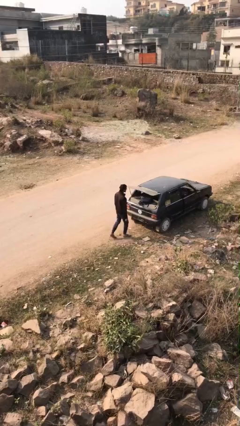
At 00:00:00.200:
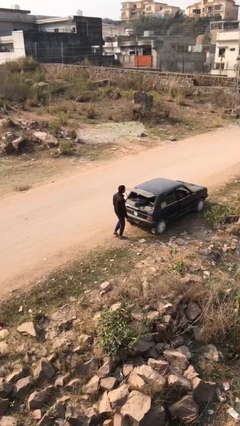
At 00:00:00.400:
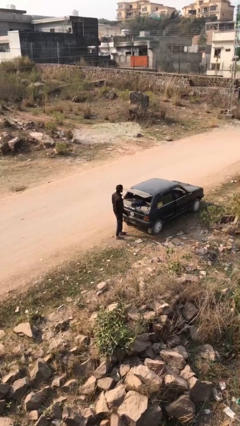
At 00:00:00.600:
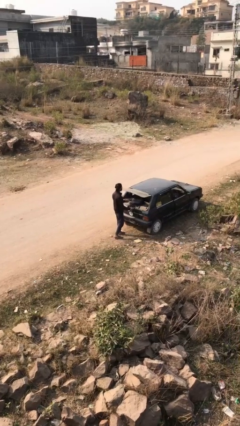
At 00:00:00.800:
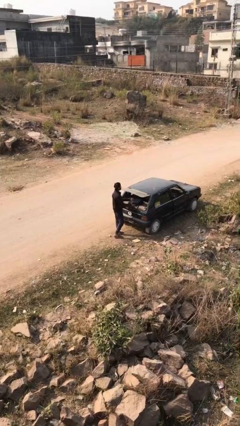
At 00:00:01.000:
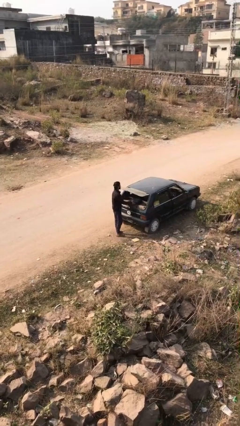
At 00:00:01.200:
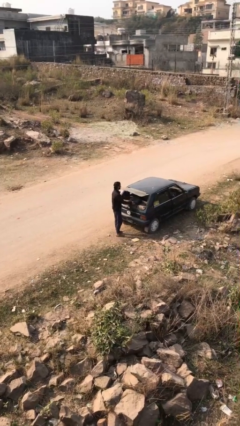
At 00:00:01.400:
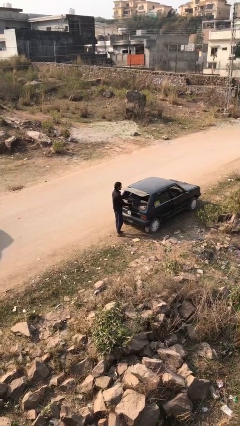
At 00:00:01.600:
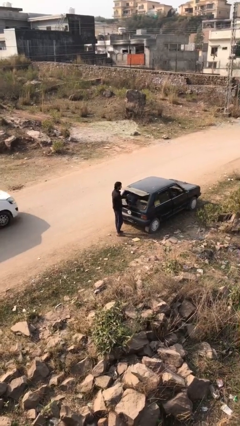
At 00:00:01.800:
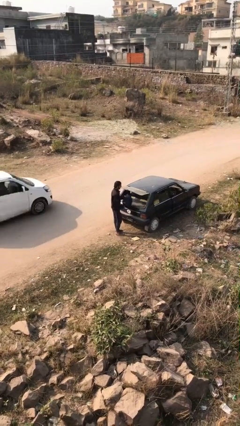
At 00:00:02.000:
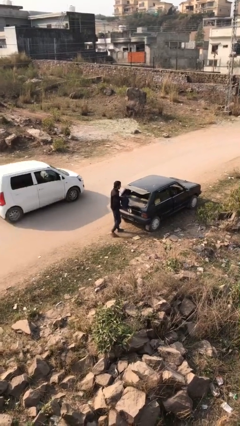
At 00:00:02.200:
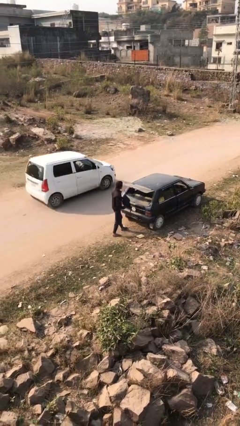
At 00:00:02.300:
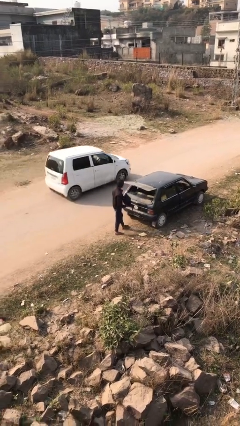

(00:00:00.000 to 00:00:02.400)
person unloads car

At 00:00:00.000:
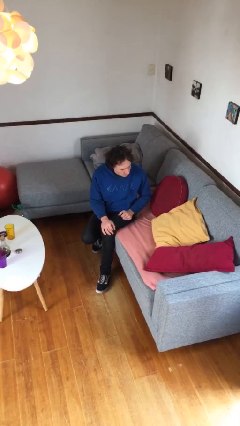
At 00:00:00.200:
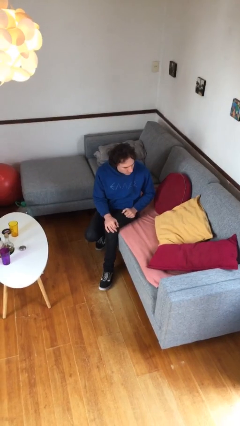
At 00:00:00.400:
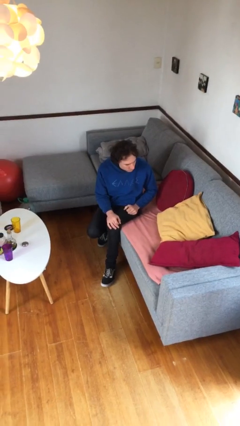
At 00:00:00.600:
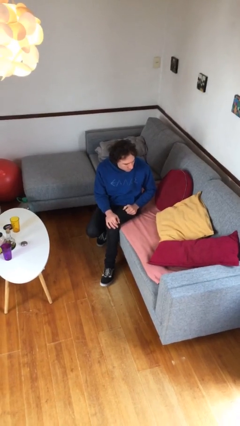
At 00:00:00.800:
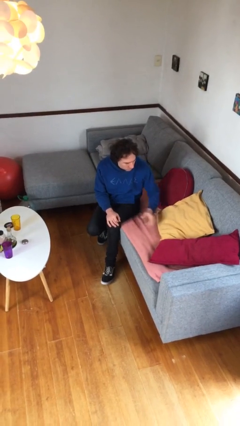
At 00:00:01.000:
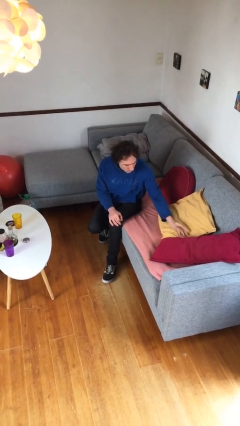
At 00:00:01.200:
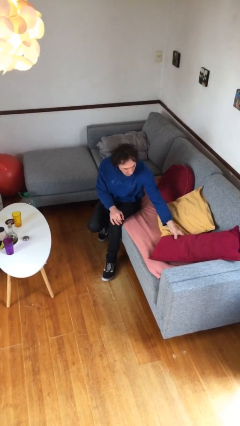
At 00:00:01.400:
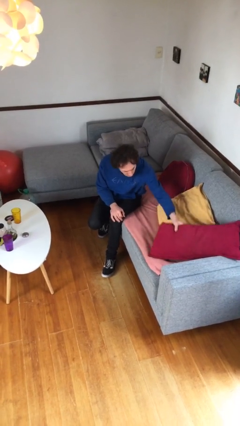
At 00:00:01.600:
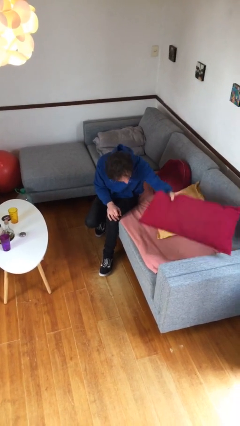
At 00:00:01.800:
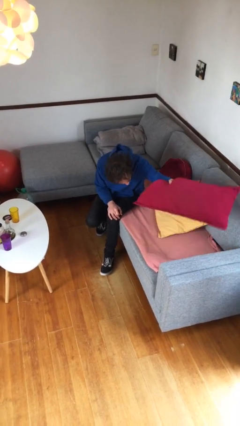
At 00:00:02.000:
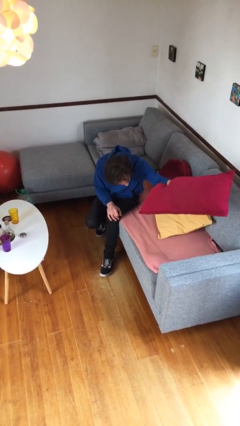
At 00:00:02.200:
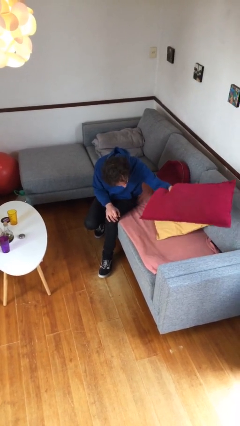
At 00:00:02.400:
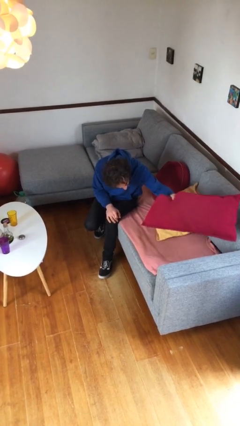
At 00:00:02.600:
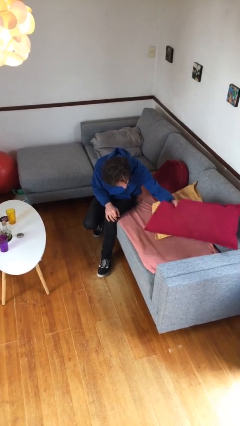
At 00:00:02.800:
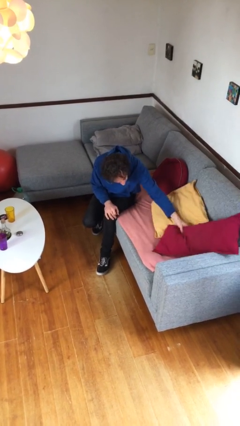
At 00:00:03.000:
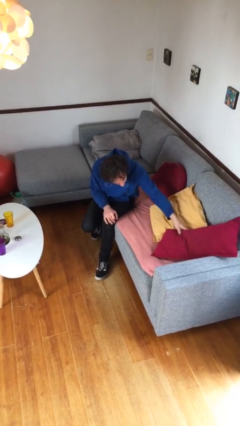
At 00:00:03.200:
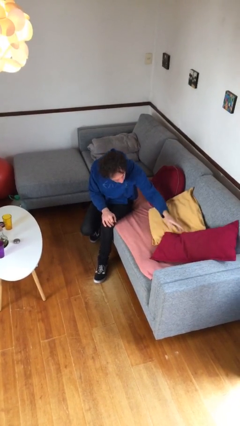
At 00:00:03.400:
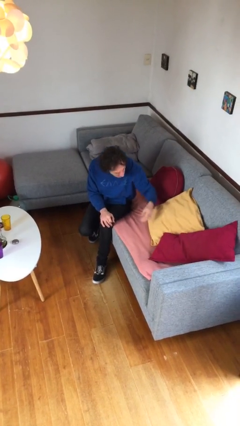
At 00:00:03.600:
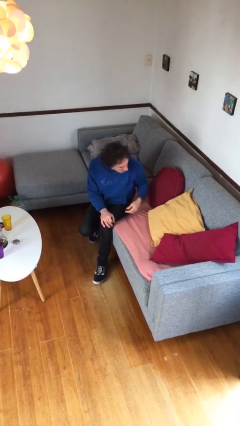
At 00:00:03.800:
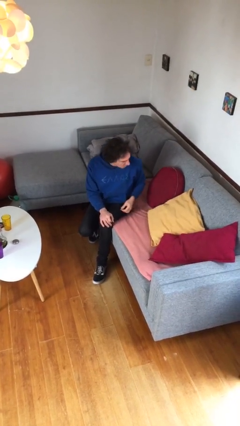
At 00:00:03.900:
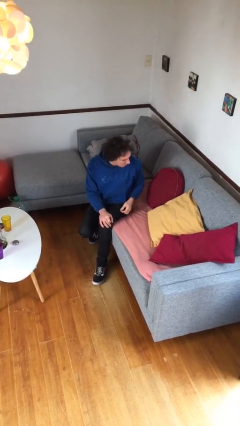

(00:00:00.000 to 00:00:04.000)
person searches in couch

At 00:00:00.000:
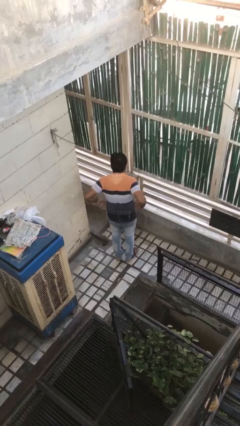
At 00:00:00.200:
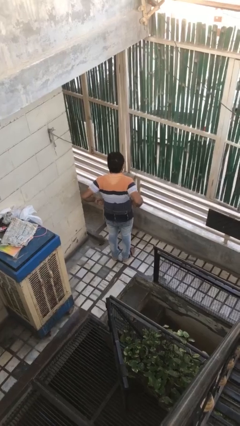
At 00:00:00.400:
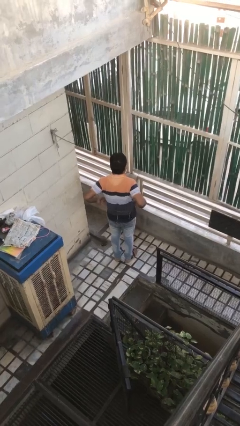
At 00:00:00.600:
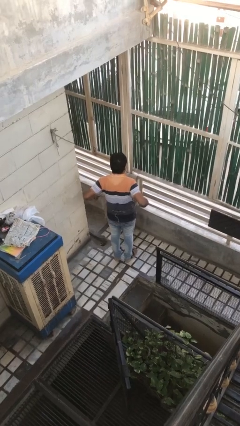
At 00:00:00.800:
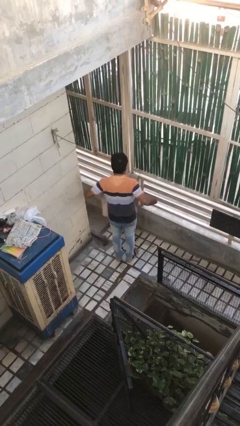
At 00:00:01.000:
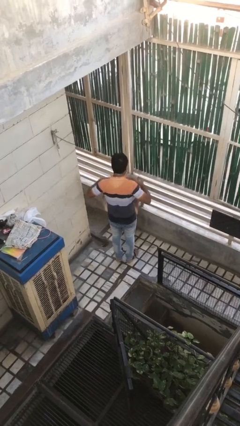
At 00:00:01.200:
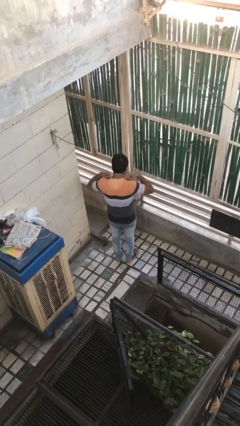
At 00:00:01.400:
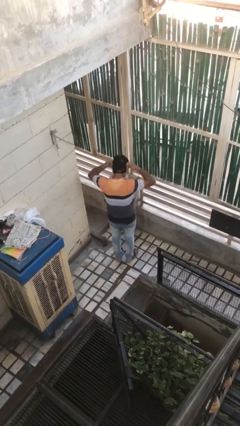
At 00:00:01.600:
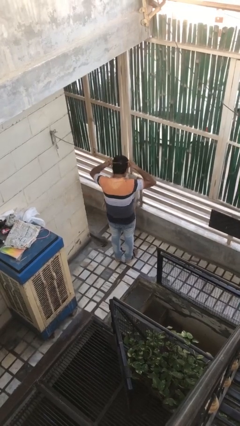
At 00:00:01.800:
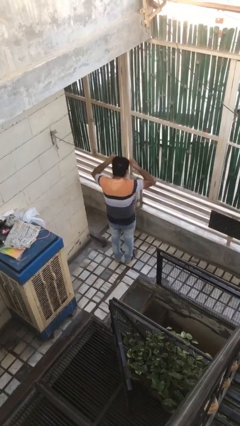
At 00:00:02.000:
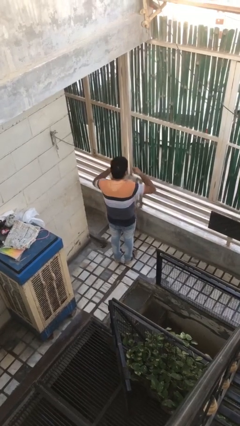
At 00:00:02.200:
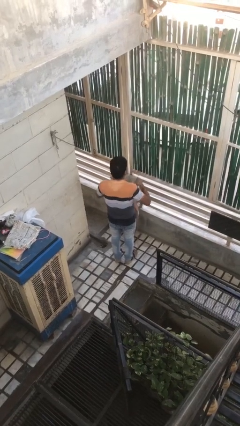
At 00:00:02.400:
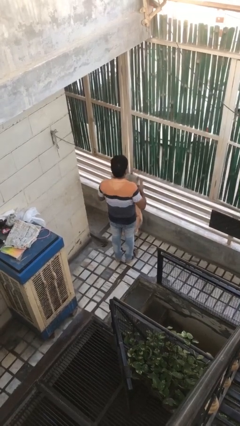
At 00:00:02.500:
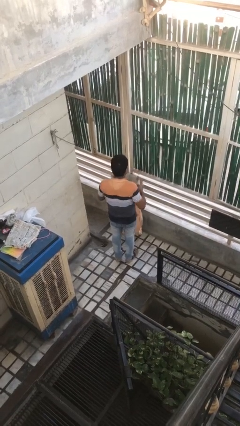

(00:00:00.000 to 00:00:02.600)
person takes off apron

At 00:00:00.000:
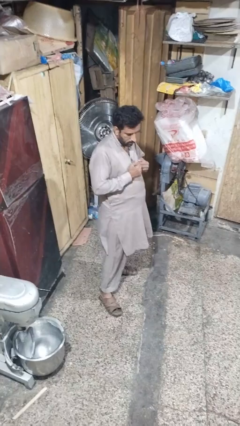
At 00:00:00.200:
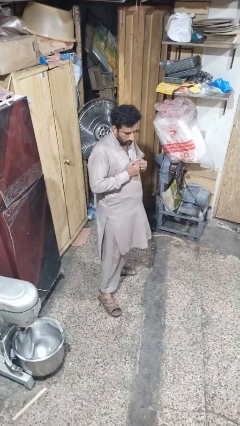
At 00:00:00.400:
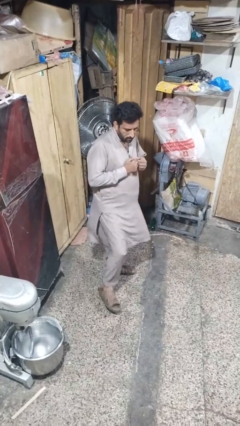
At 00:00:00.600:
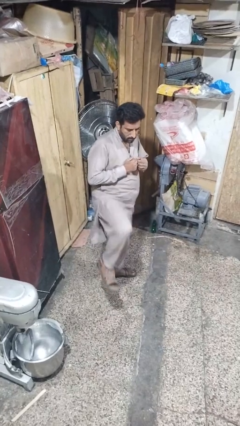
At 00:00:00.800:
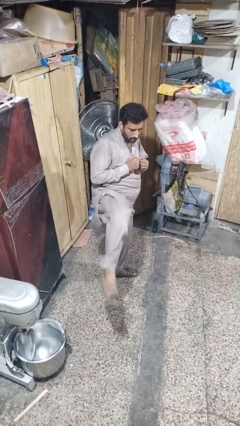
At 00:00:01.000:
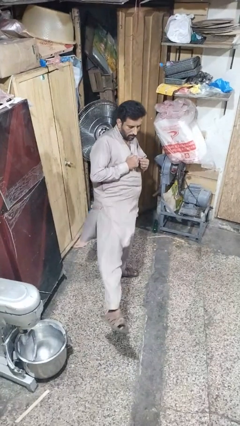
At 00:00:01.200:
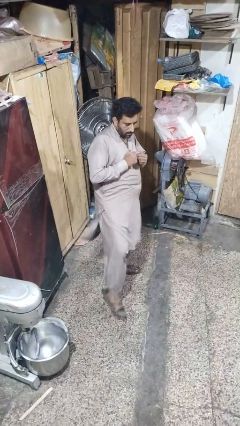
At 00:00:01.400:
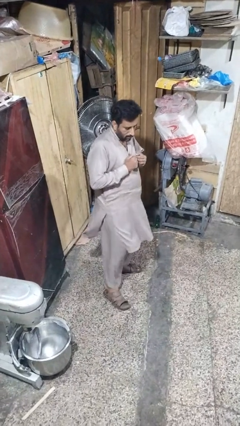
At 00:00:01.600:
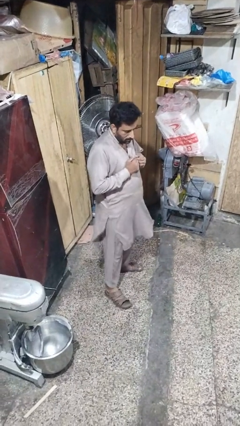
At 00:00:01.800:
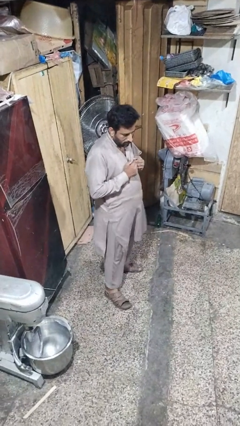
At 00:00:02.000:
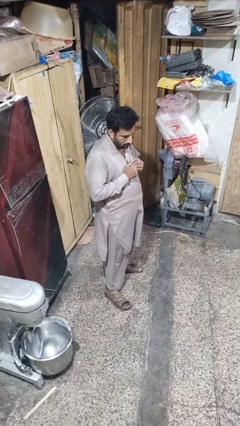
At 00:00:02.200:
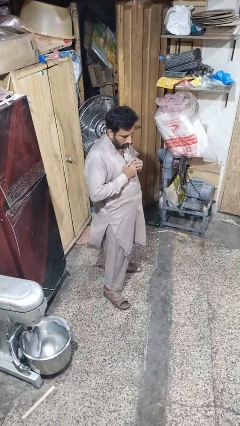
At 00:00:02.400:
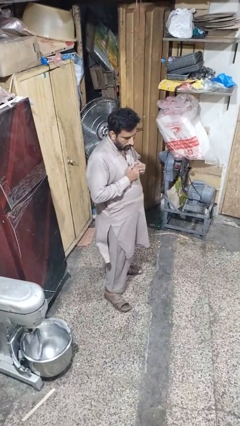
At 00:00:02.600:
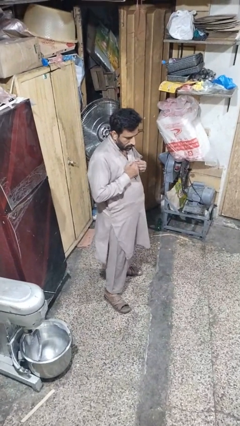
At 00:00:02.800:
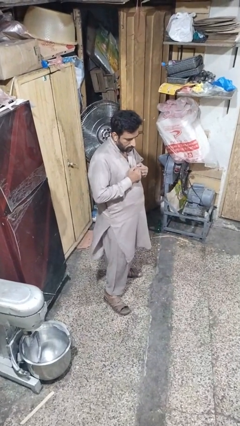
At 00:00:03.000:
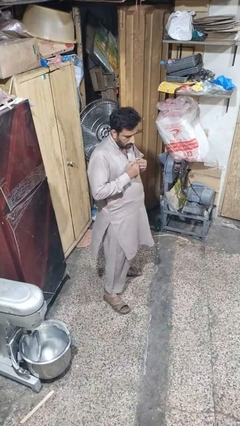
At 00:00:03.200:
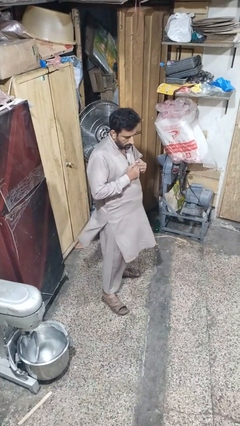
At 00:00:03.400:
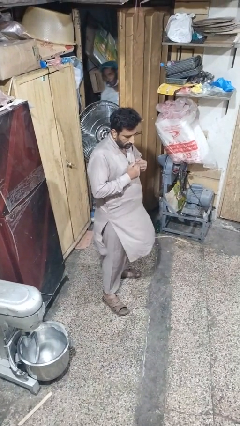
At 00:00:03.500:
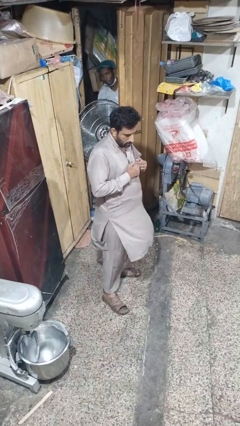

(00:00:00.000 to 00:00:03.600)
person karate kicks

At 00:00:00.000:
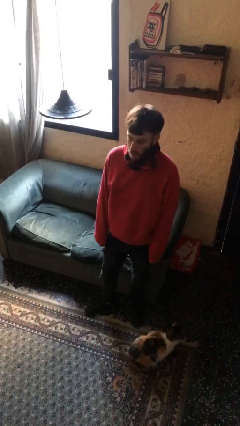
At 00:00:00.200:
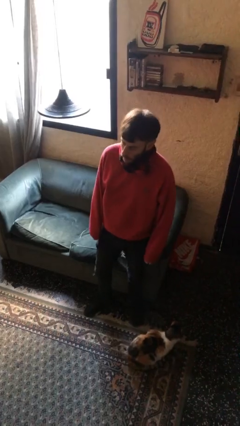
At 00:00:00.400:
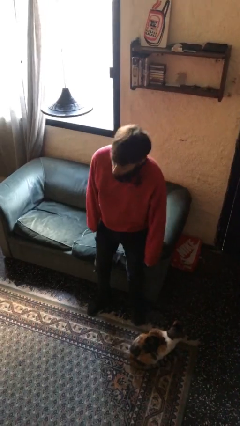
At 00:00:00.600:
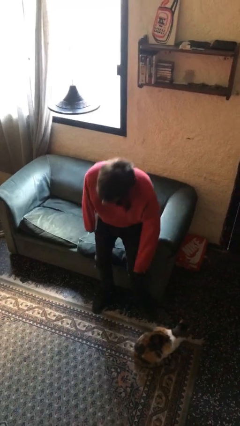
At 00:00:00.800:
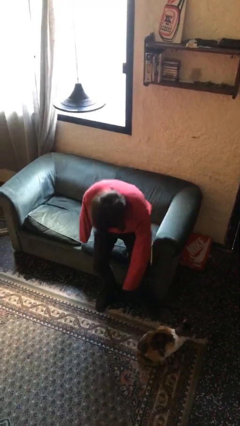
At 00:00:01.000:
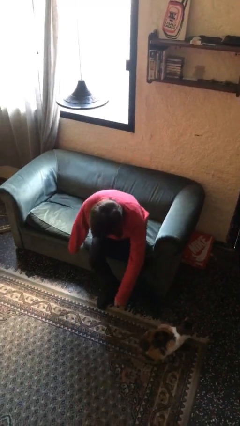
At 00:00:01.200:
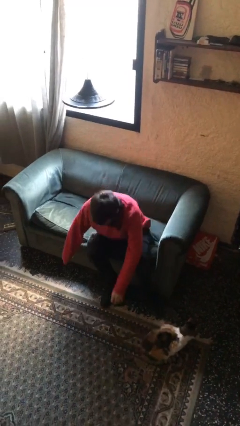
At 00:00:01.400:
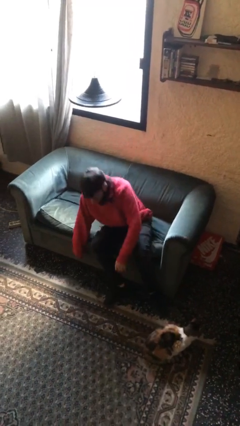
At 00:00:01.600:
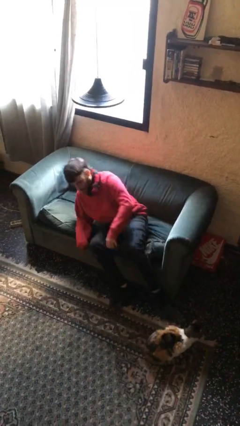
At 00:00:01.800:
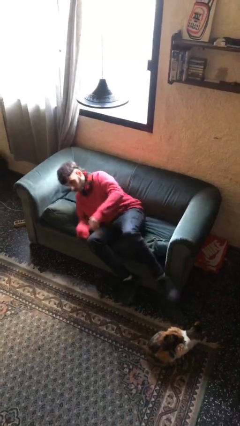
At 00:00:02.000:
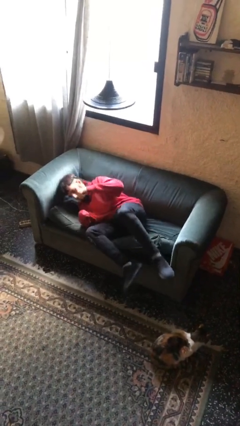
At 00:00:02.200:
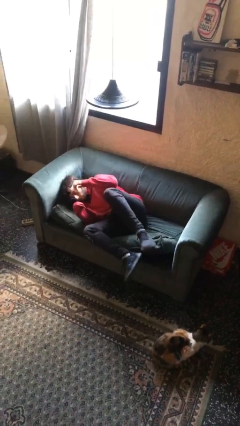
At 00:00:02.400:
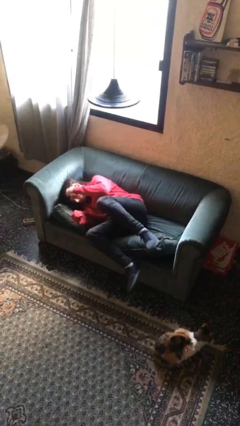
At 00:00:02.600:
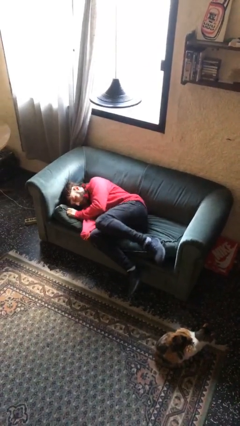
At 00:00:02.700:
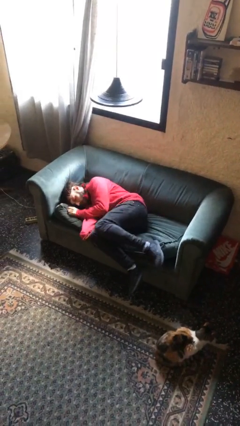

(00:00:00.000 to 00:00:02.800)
person lies down on couch

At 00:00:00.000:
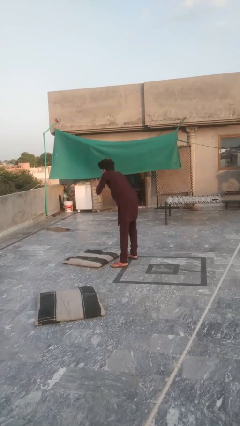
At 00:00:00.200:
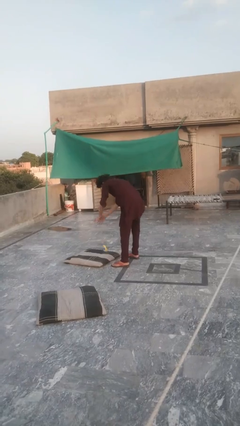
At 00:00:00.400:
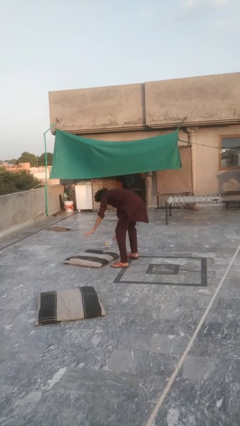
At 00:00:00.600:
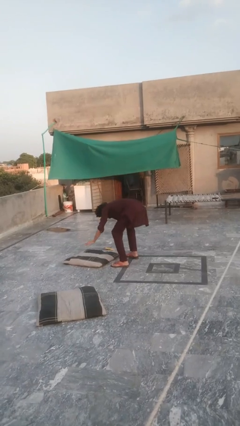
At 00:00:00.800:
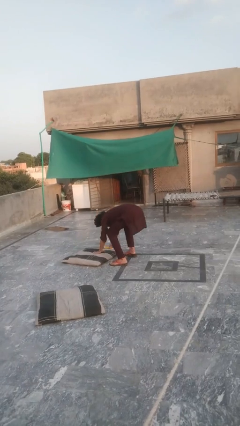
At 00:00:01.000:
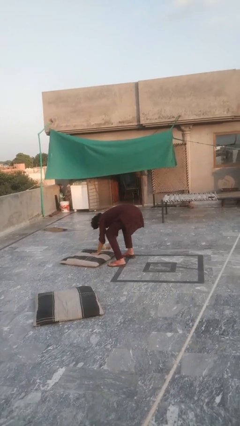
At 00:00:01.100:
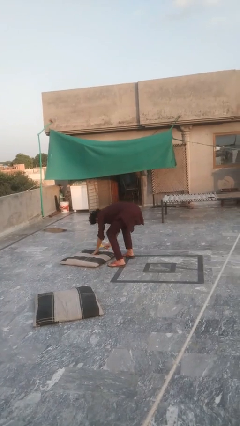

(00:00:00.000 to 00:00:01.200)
person catches dropped object

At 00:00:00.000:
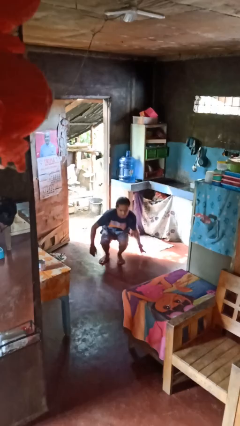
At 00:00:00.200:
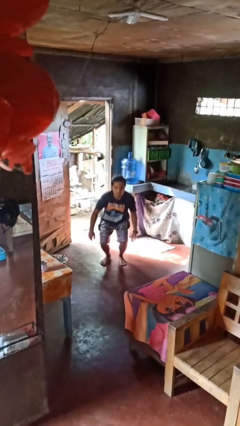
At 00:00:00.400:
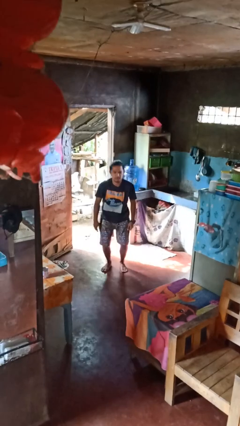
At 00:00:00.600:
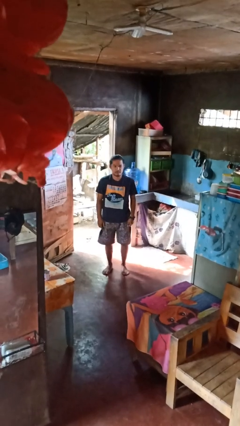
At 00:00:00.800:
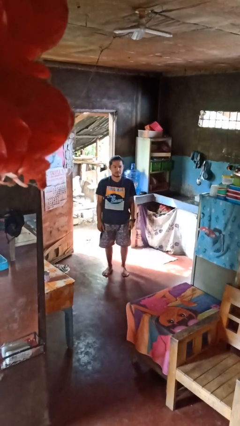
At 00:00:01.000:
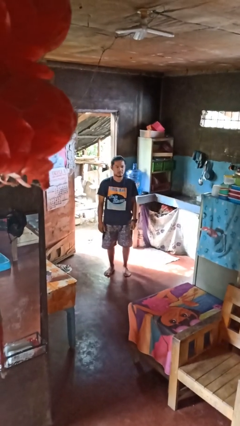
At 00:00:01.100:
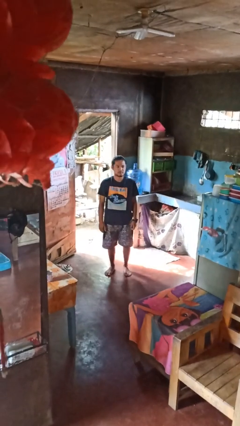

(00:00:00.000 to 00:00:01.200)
person stands up from floor
